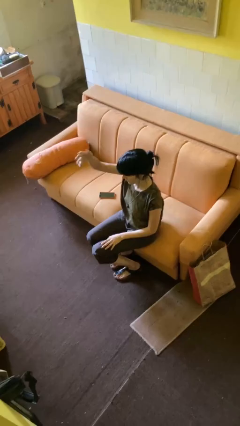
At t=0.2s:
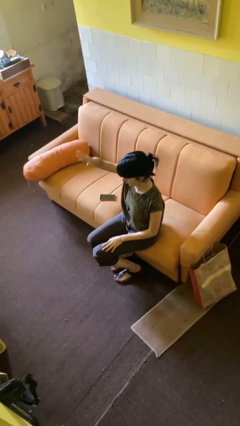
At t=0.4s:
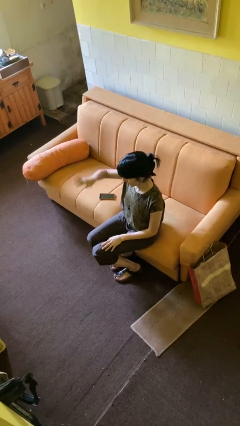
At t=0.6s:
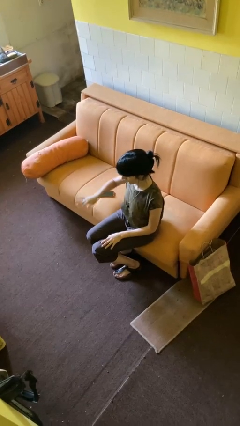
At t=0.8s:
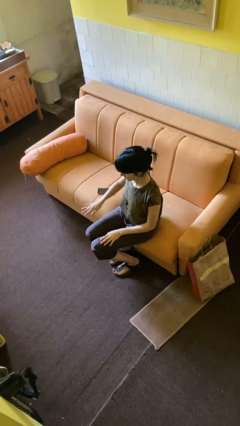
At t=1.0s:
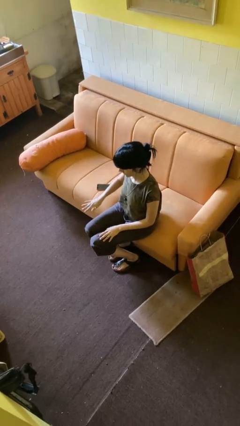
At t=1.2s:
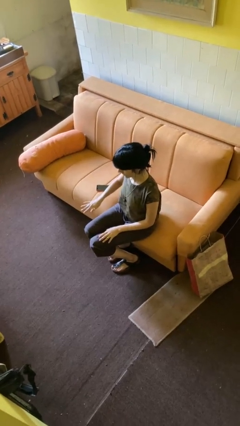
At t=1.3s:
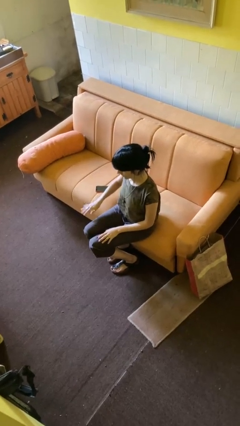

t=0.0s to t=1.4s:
person gestures swipe down

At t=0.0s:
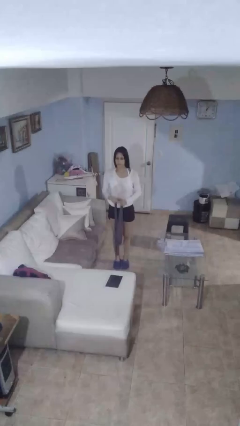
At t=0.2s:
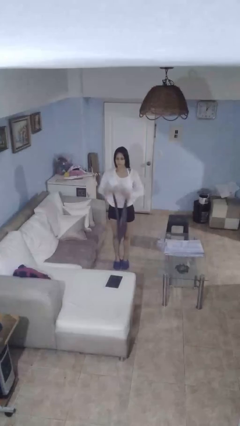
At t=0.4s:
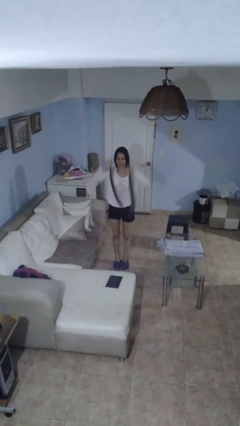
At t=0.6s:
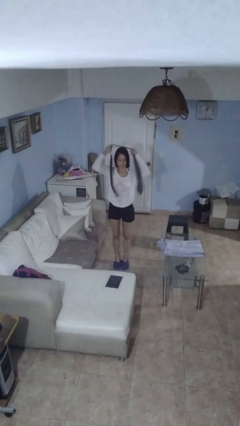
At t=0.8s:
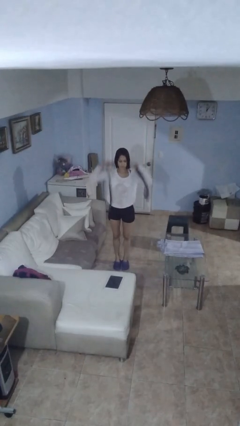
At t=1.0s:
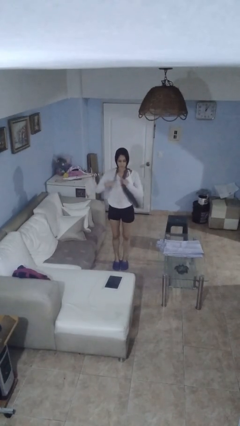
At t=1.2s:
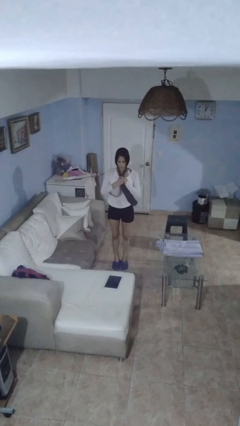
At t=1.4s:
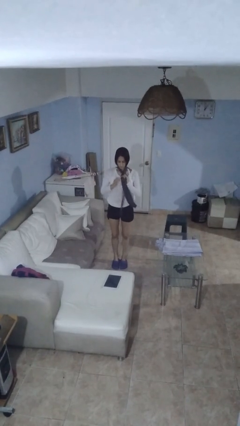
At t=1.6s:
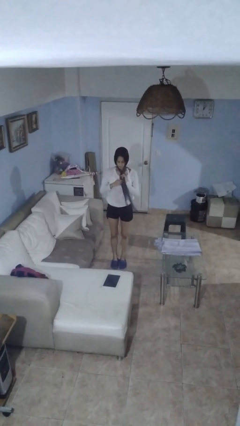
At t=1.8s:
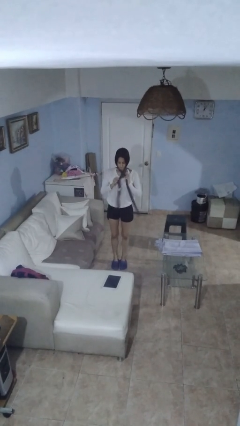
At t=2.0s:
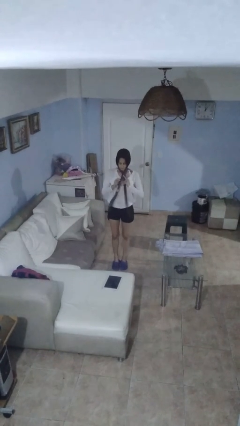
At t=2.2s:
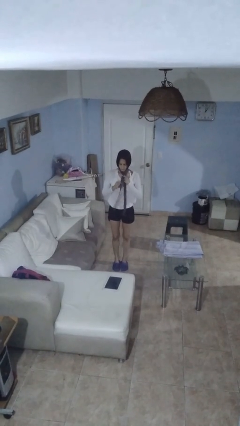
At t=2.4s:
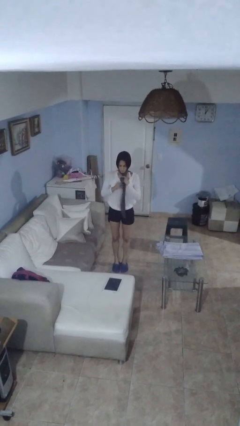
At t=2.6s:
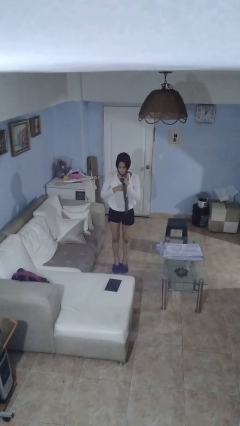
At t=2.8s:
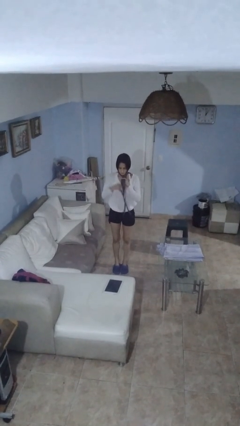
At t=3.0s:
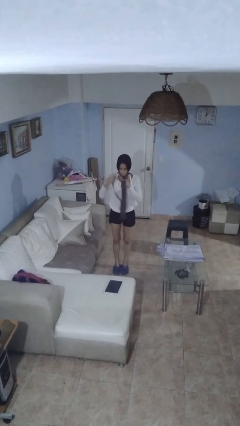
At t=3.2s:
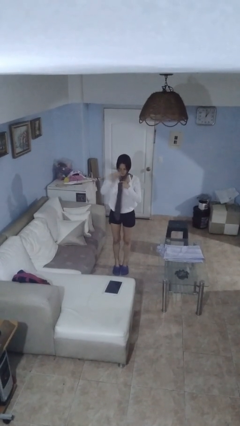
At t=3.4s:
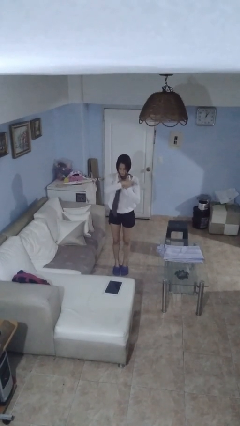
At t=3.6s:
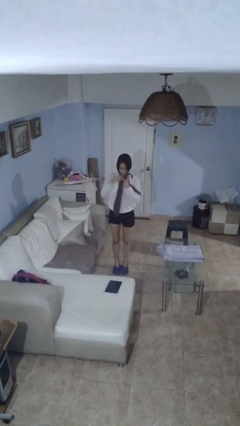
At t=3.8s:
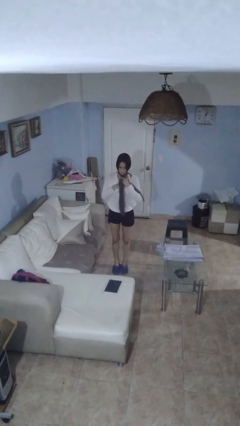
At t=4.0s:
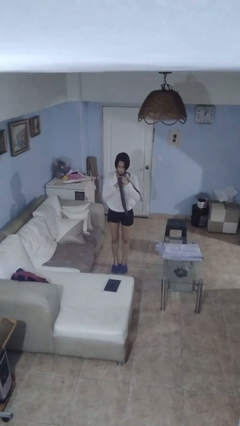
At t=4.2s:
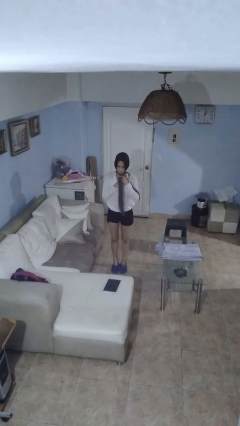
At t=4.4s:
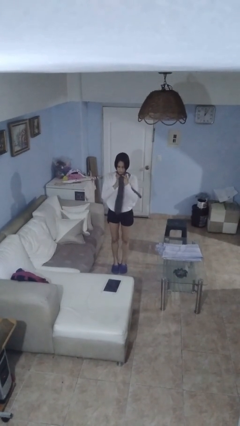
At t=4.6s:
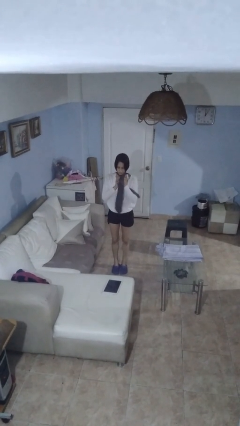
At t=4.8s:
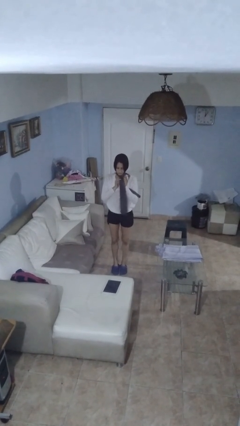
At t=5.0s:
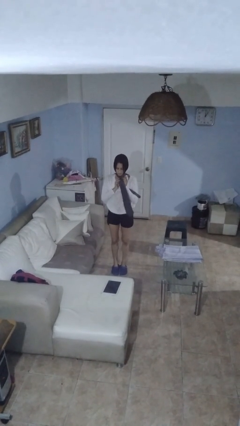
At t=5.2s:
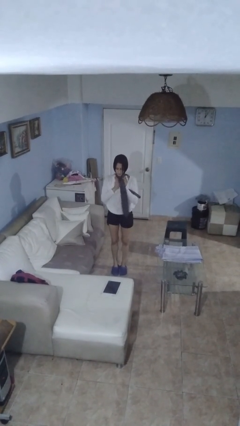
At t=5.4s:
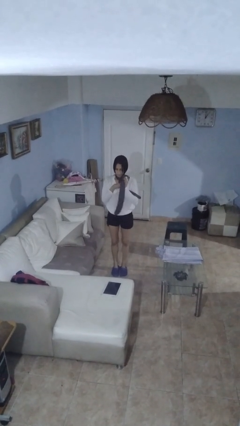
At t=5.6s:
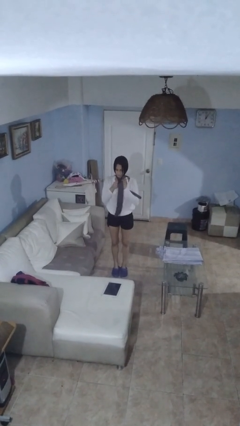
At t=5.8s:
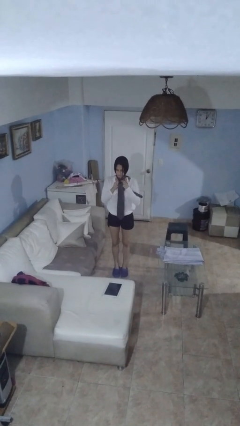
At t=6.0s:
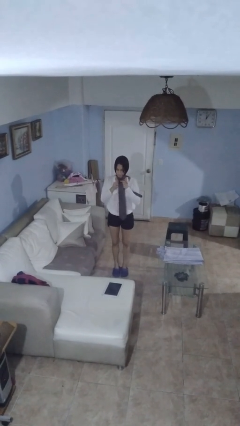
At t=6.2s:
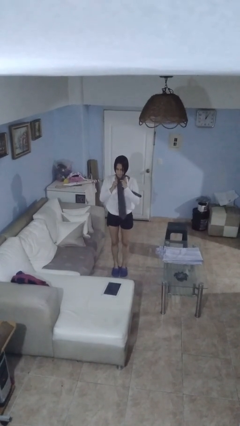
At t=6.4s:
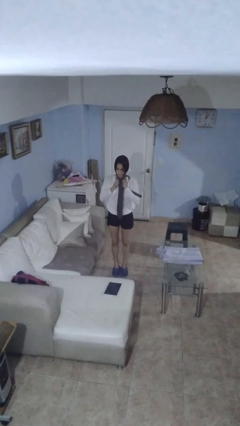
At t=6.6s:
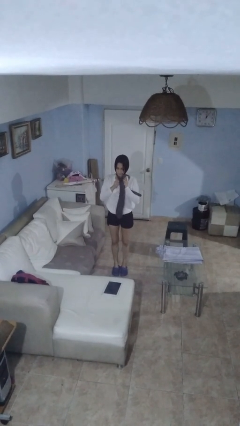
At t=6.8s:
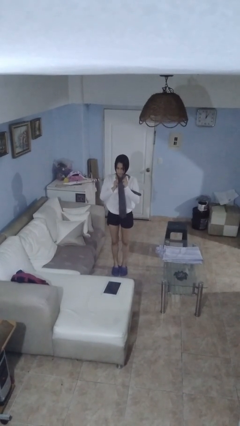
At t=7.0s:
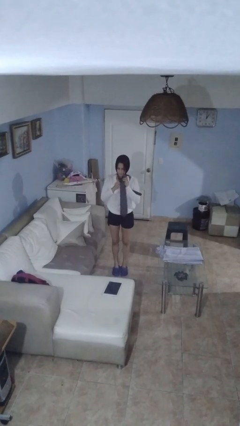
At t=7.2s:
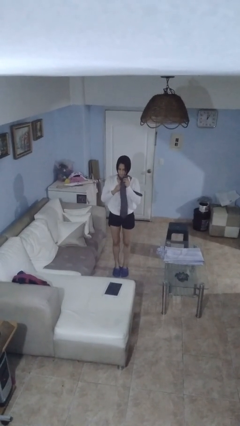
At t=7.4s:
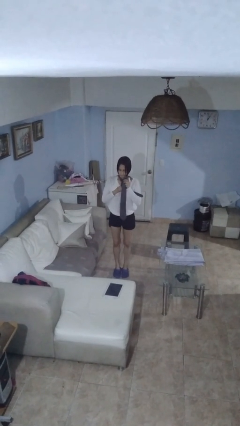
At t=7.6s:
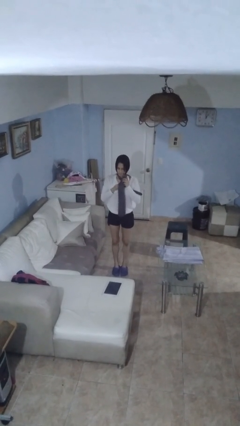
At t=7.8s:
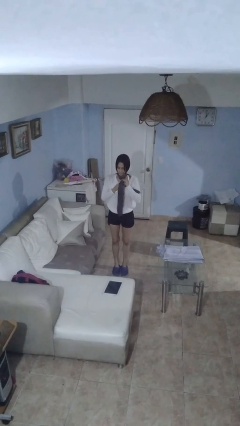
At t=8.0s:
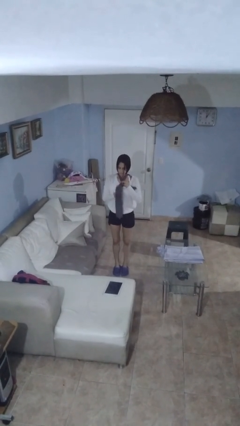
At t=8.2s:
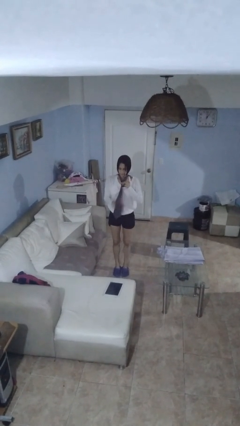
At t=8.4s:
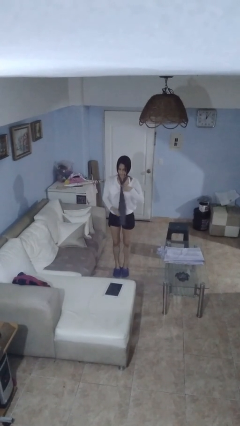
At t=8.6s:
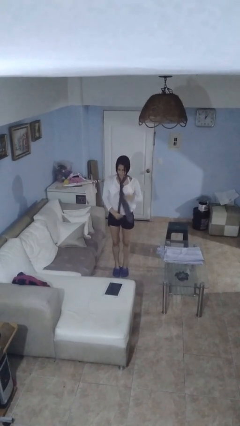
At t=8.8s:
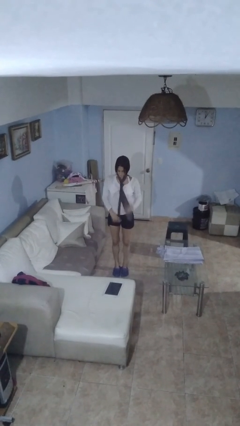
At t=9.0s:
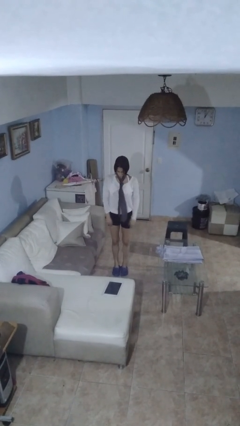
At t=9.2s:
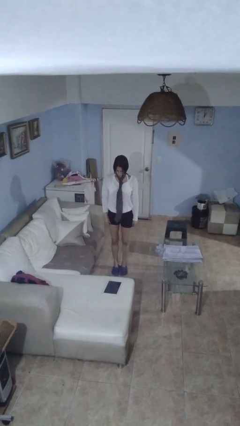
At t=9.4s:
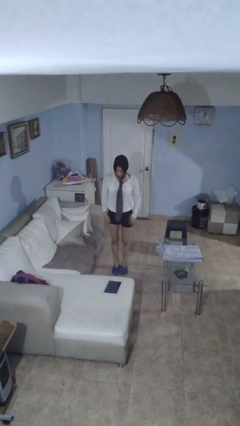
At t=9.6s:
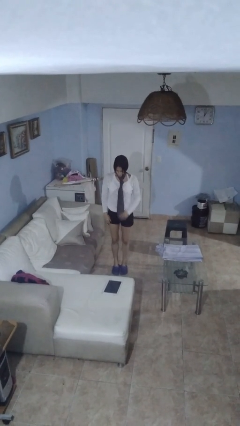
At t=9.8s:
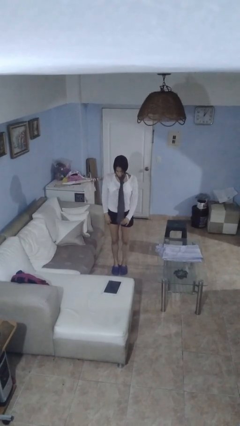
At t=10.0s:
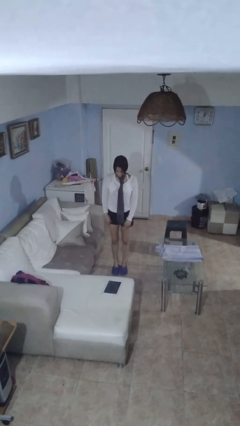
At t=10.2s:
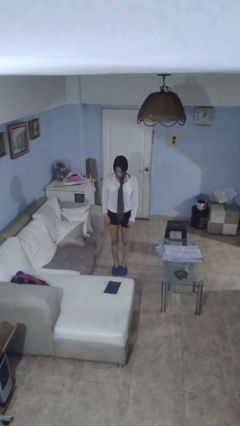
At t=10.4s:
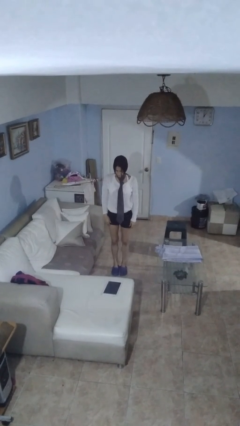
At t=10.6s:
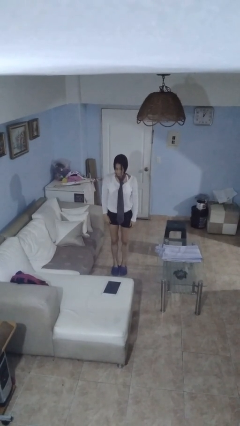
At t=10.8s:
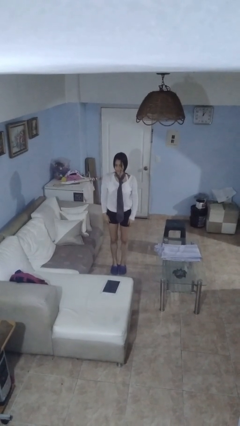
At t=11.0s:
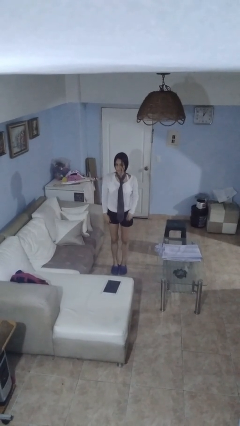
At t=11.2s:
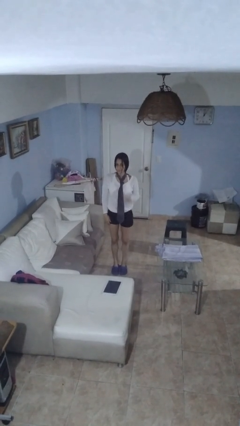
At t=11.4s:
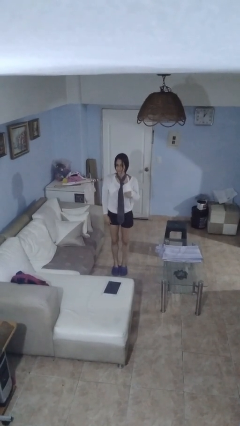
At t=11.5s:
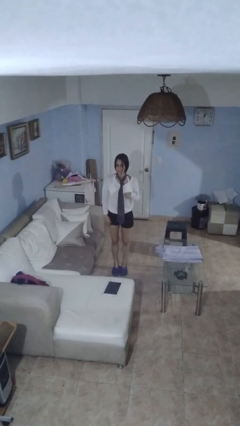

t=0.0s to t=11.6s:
person puts on necktie

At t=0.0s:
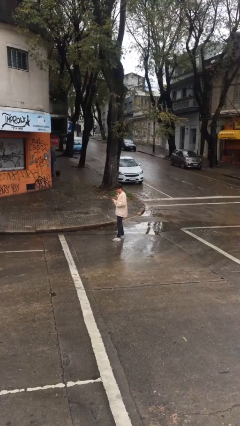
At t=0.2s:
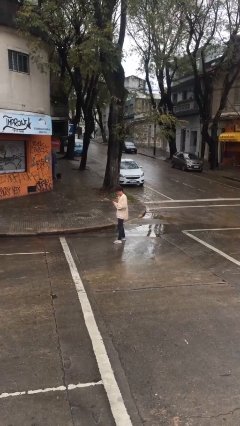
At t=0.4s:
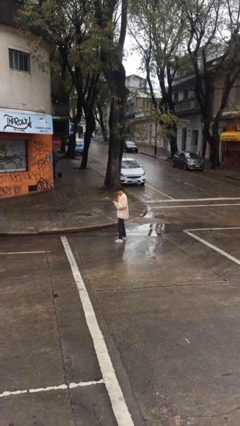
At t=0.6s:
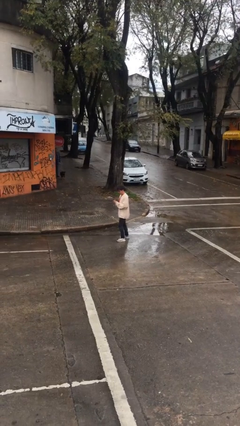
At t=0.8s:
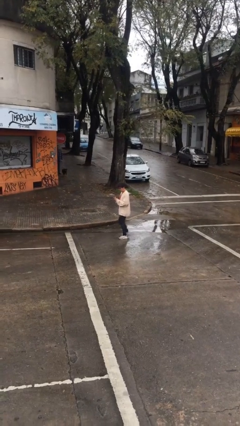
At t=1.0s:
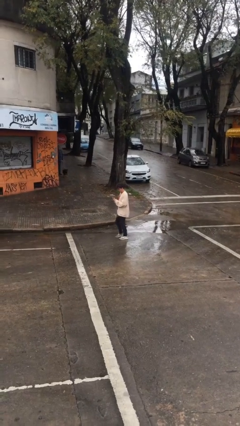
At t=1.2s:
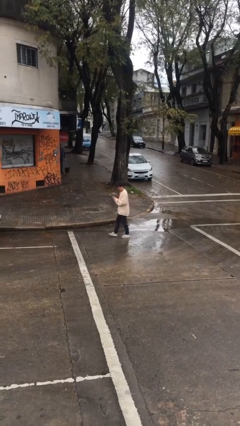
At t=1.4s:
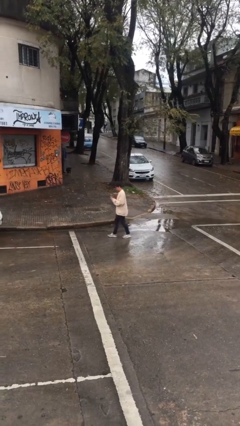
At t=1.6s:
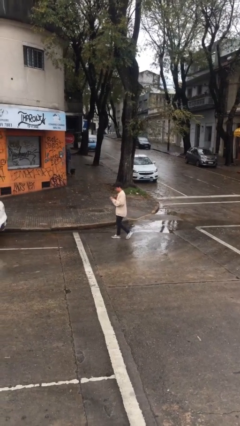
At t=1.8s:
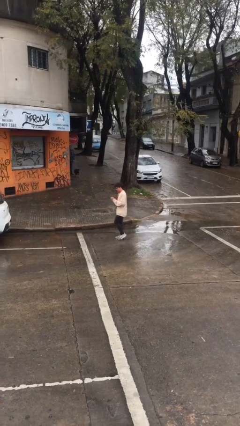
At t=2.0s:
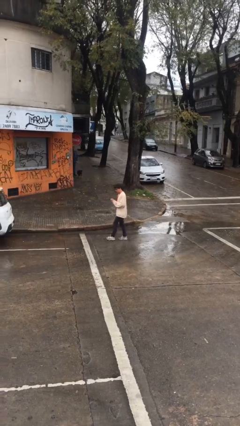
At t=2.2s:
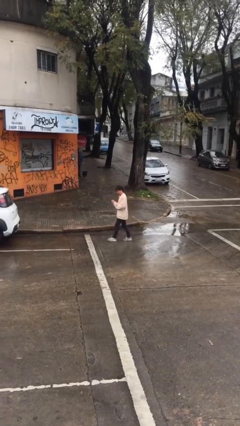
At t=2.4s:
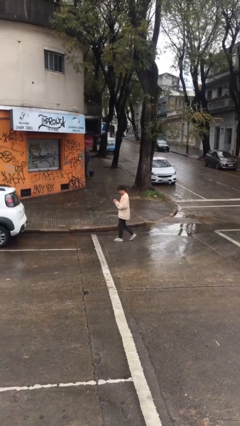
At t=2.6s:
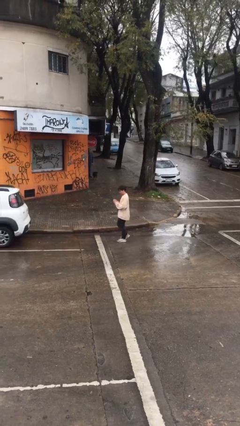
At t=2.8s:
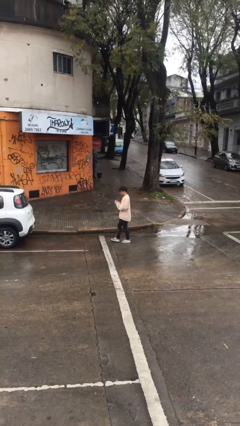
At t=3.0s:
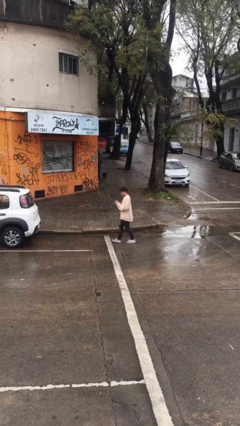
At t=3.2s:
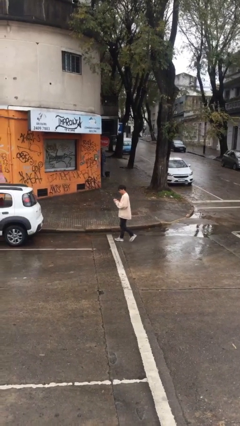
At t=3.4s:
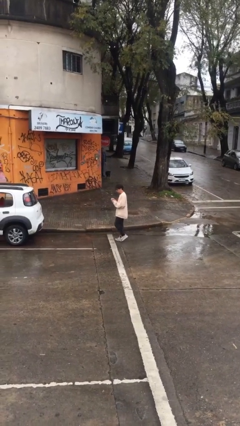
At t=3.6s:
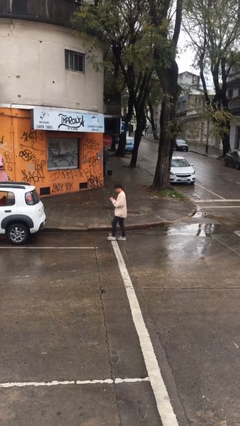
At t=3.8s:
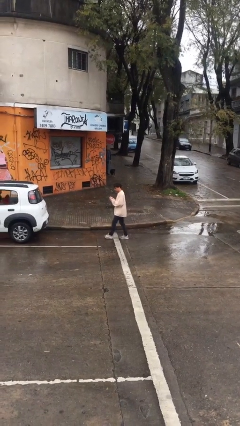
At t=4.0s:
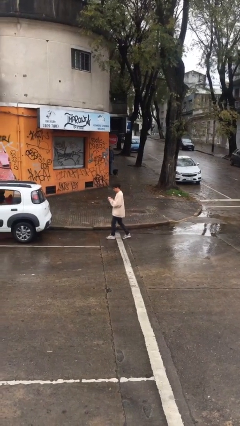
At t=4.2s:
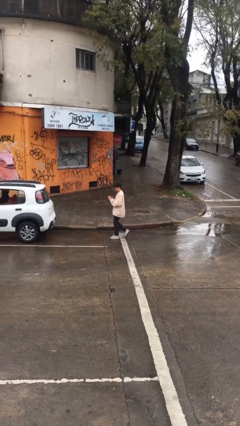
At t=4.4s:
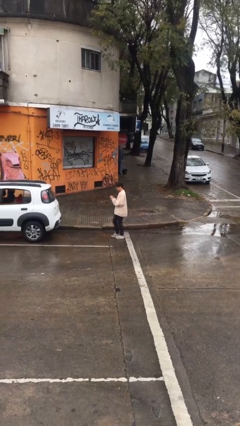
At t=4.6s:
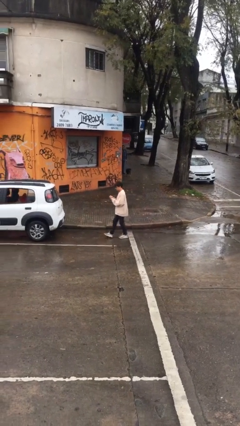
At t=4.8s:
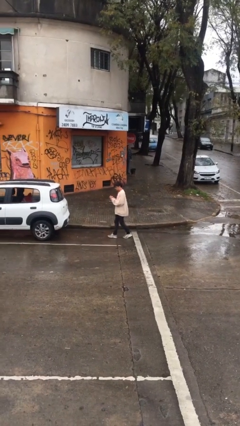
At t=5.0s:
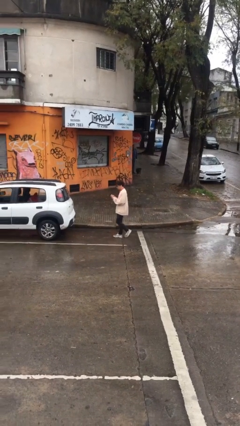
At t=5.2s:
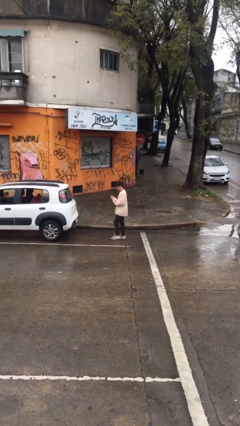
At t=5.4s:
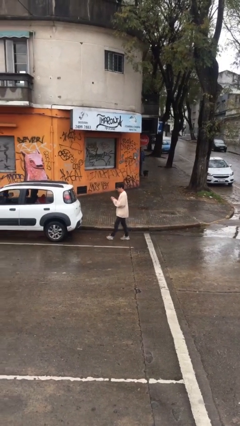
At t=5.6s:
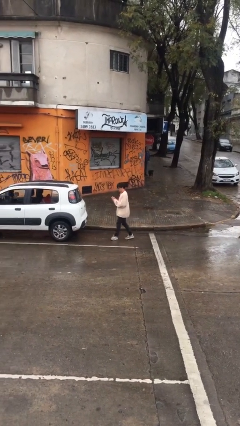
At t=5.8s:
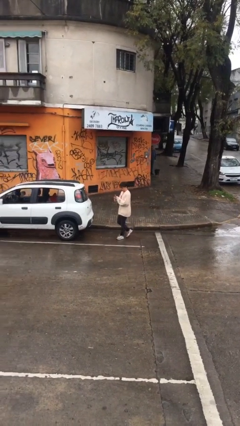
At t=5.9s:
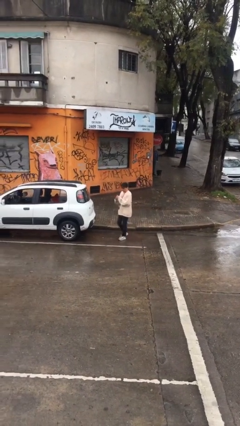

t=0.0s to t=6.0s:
person texts on phone
